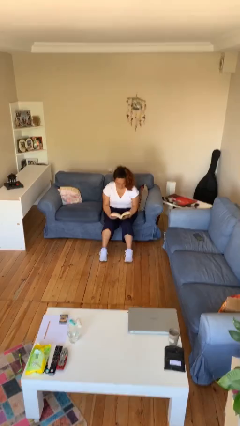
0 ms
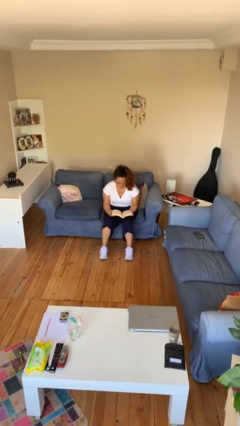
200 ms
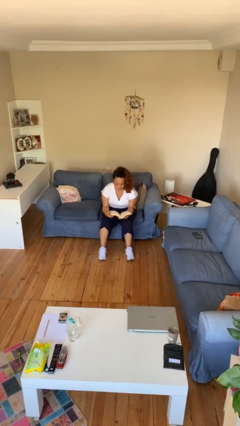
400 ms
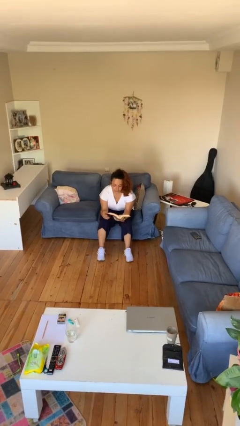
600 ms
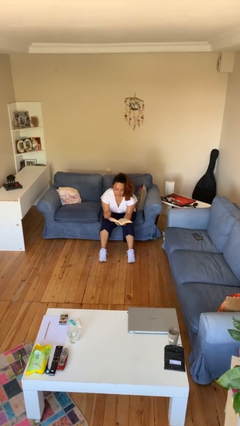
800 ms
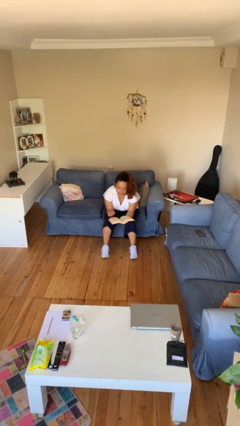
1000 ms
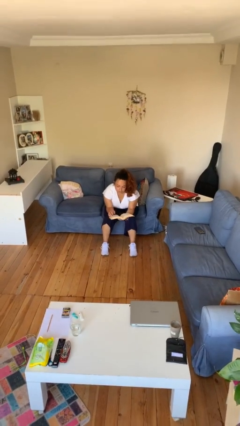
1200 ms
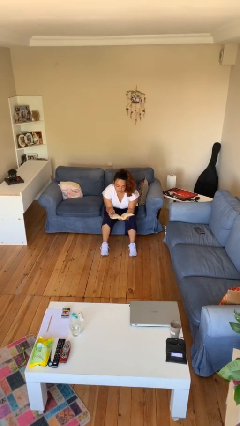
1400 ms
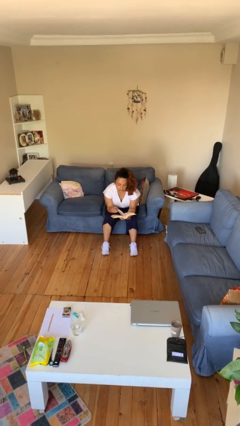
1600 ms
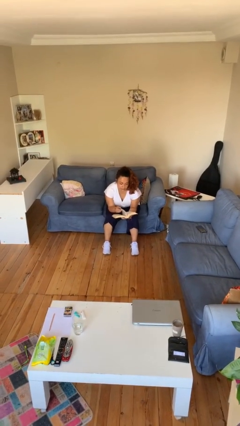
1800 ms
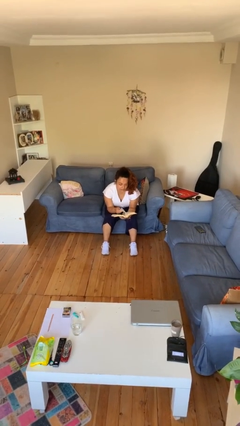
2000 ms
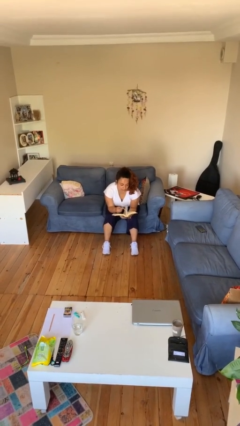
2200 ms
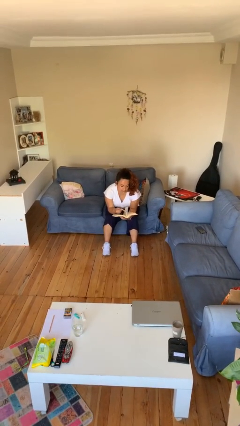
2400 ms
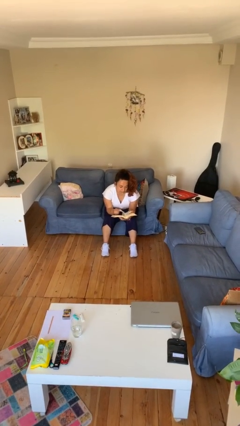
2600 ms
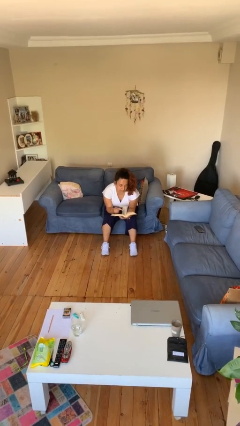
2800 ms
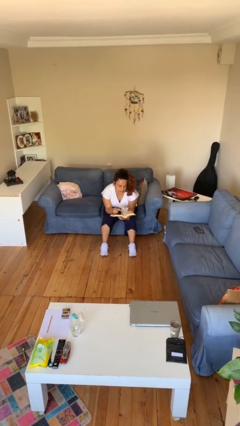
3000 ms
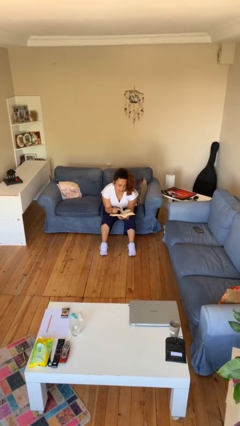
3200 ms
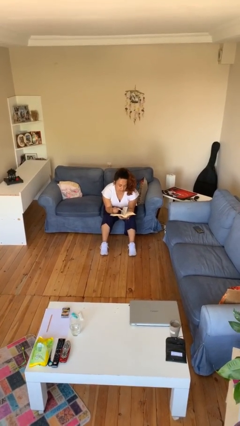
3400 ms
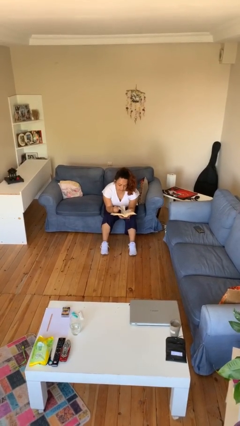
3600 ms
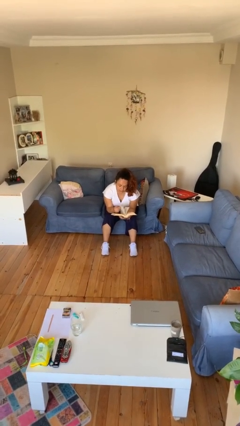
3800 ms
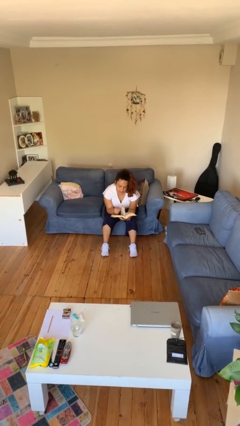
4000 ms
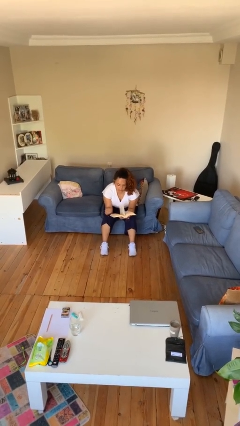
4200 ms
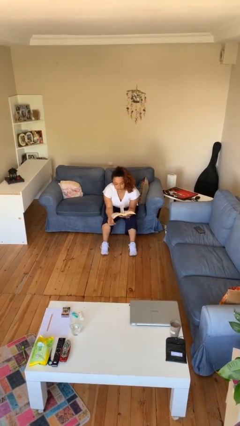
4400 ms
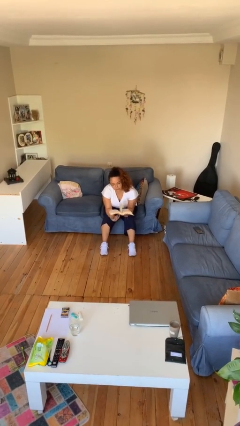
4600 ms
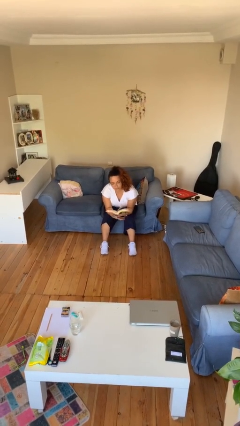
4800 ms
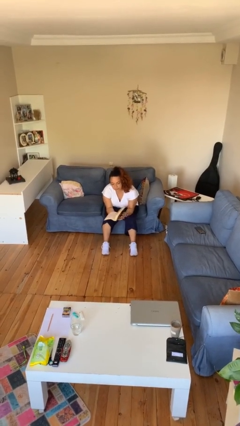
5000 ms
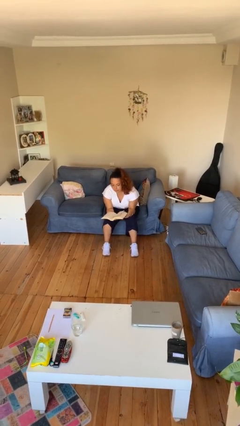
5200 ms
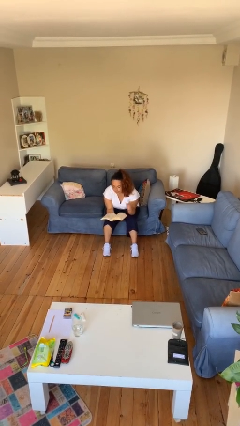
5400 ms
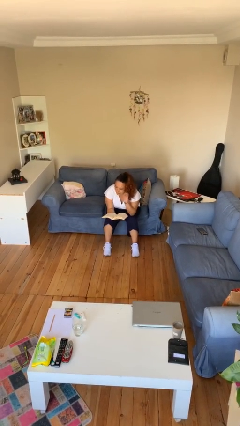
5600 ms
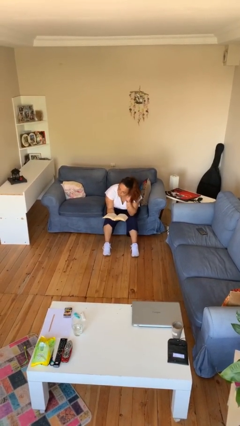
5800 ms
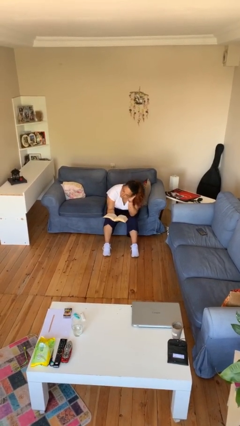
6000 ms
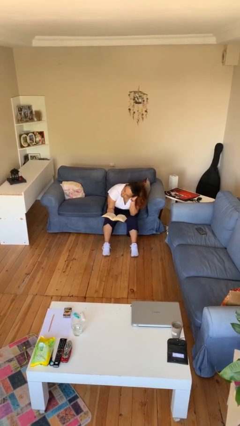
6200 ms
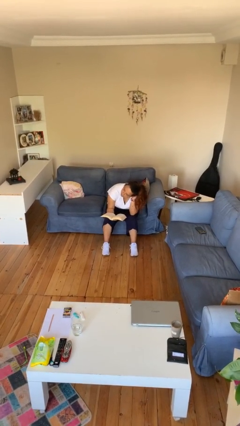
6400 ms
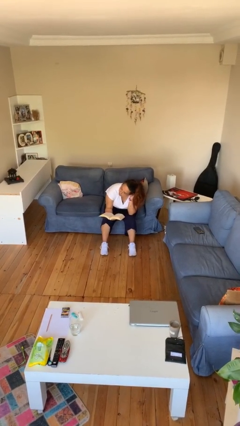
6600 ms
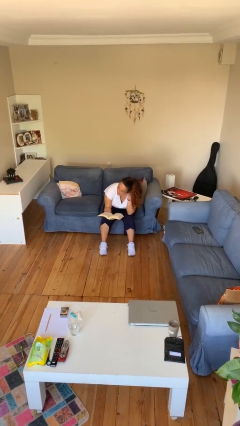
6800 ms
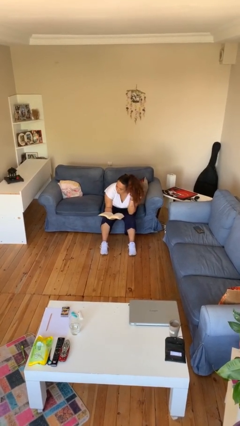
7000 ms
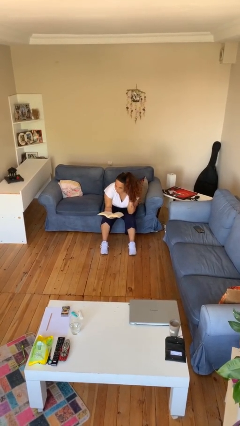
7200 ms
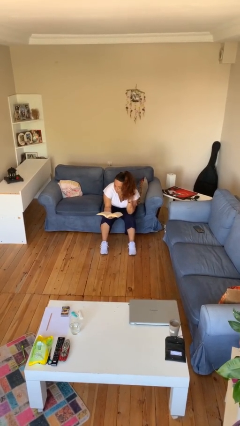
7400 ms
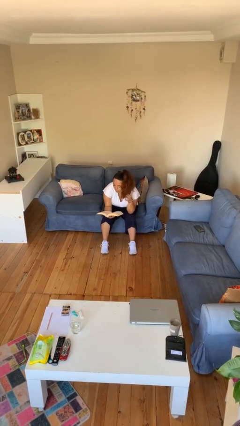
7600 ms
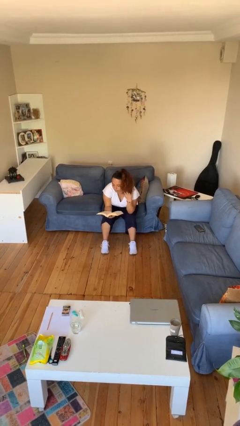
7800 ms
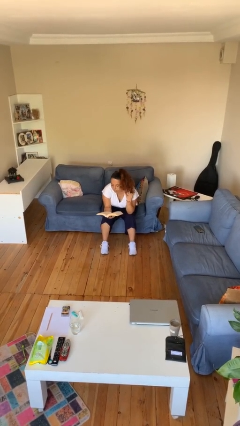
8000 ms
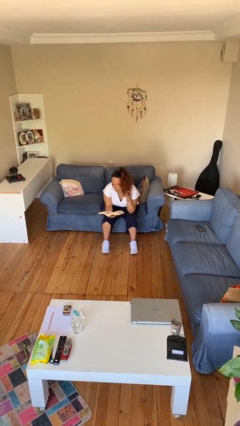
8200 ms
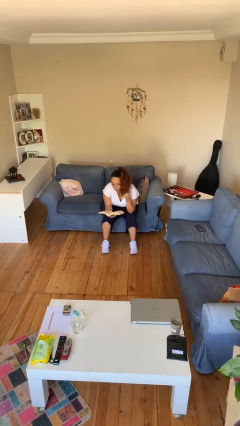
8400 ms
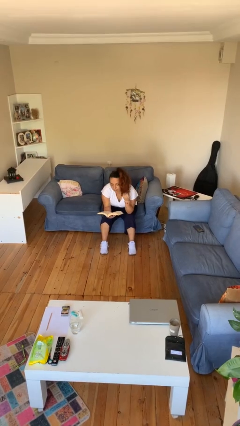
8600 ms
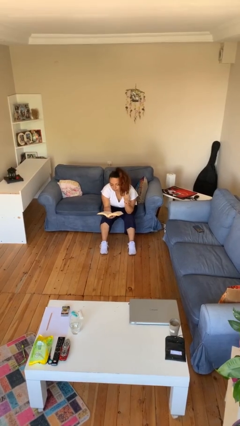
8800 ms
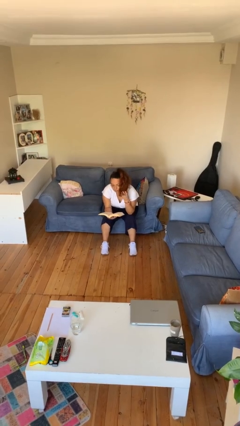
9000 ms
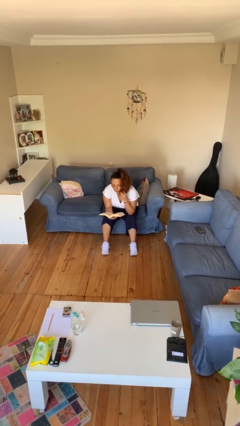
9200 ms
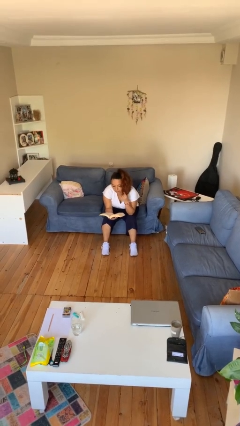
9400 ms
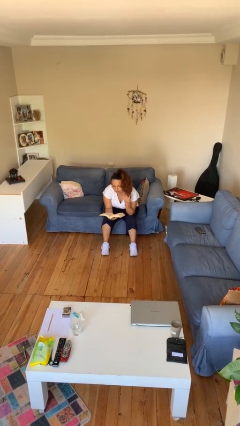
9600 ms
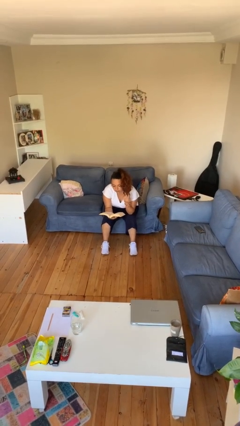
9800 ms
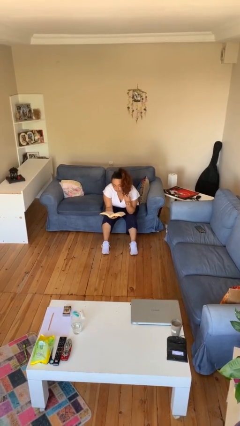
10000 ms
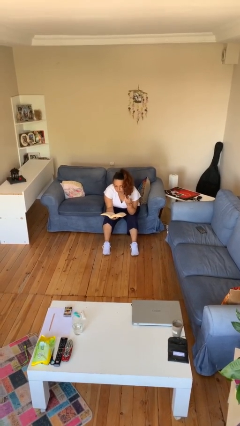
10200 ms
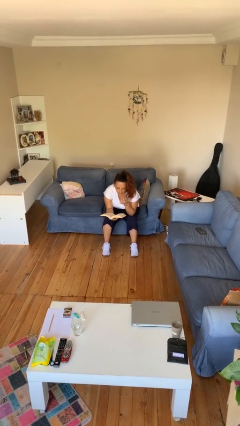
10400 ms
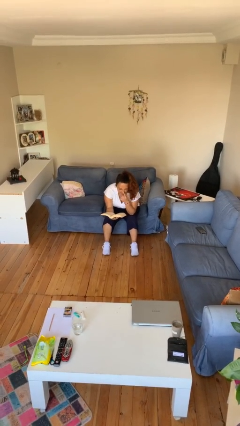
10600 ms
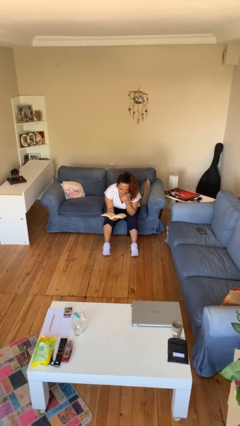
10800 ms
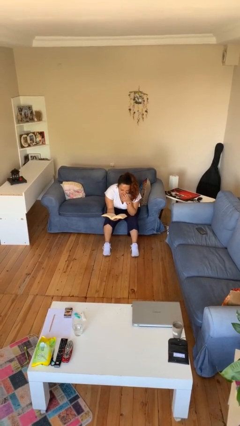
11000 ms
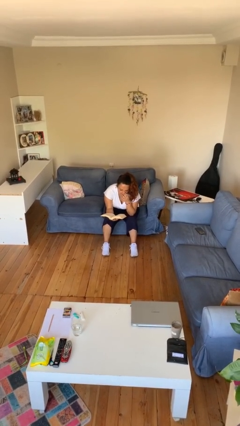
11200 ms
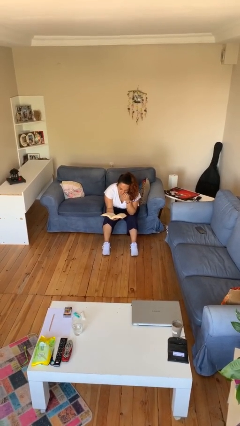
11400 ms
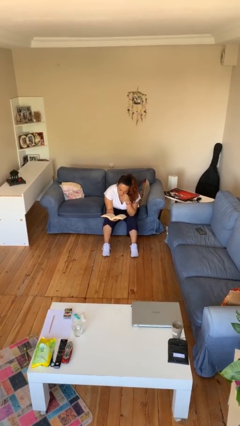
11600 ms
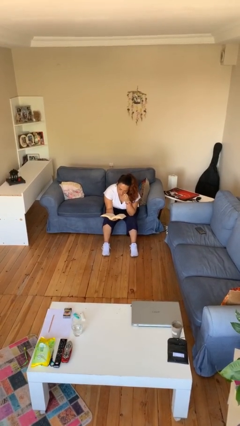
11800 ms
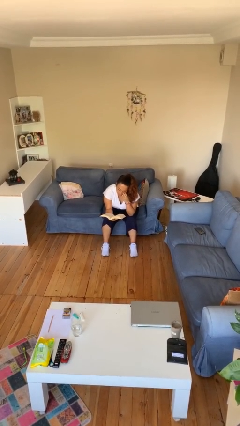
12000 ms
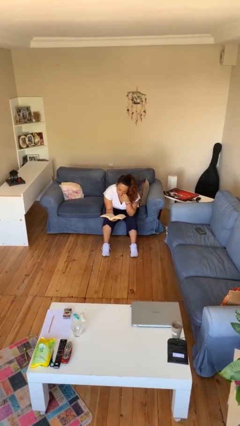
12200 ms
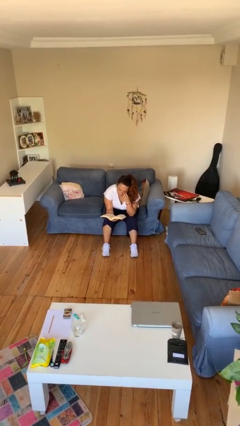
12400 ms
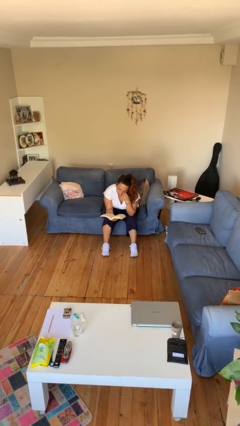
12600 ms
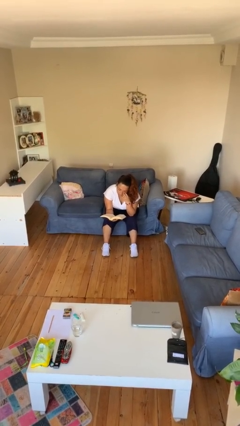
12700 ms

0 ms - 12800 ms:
person reads document

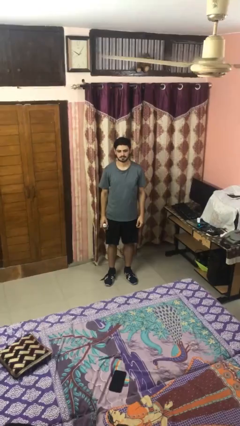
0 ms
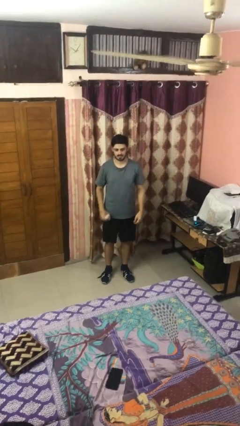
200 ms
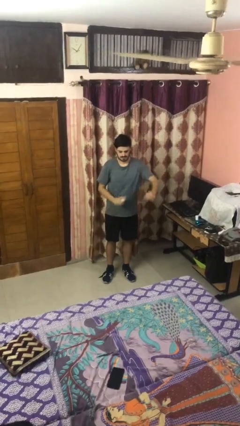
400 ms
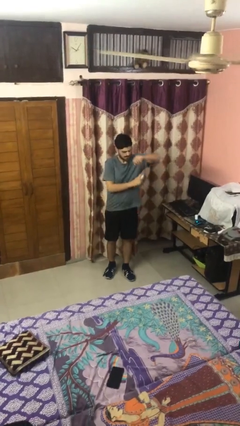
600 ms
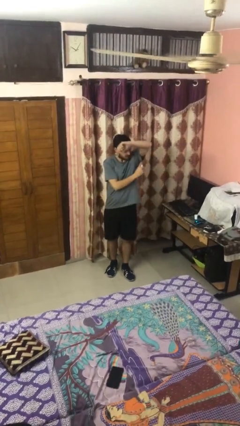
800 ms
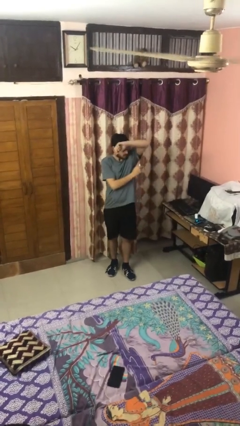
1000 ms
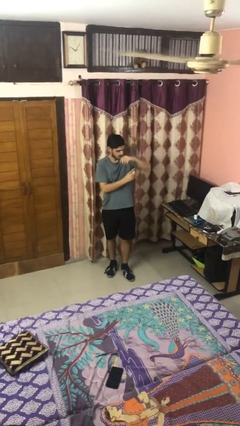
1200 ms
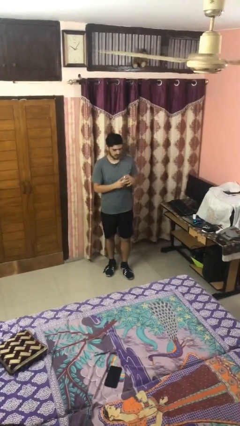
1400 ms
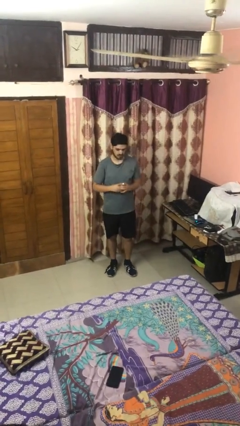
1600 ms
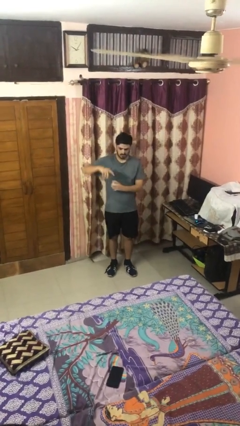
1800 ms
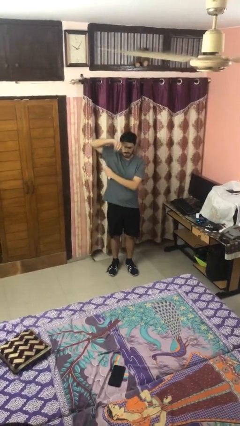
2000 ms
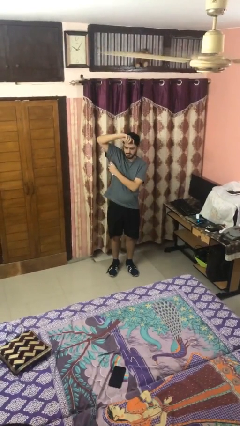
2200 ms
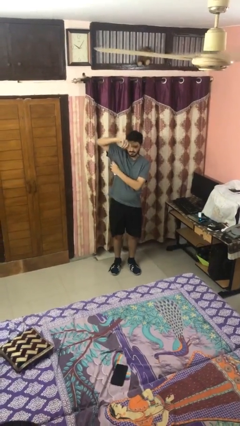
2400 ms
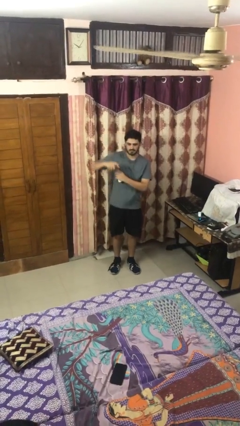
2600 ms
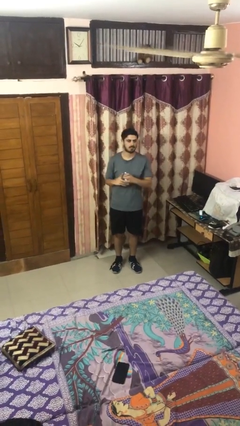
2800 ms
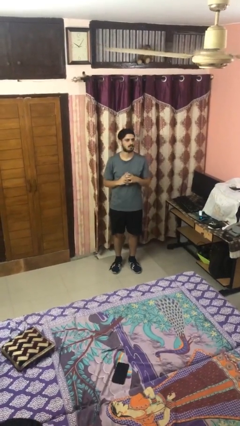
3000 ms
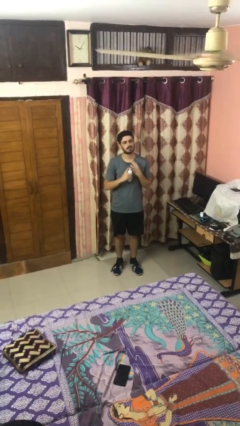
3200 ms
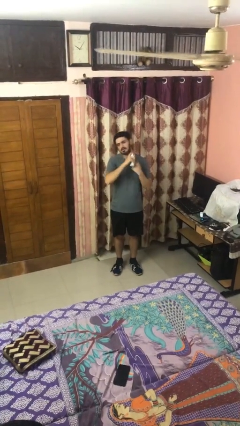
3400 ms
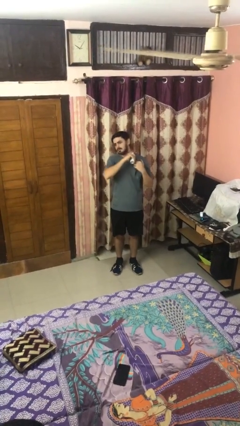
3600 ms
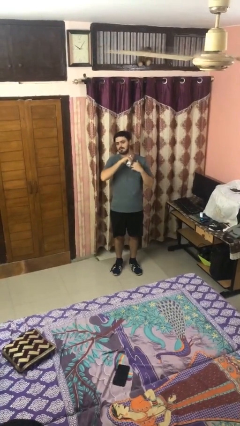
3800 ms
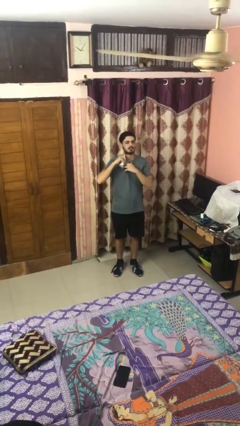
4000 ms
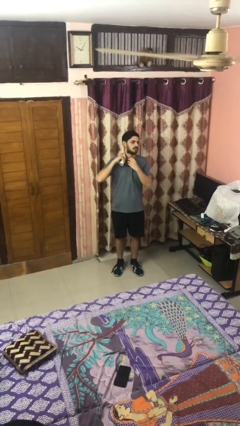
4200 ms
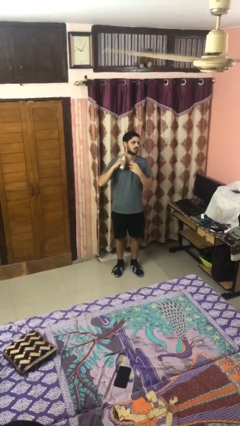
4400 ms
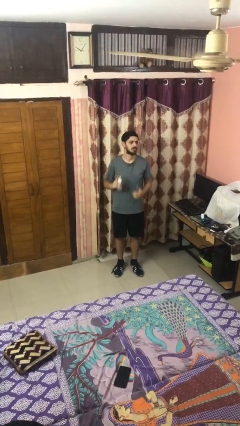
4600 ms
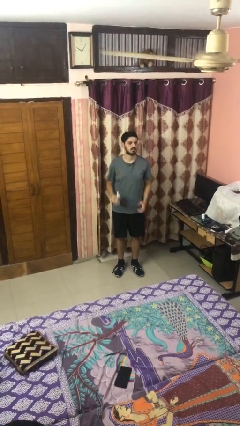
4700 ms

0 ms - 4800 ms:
person applies deodorant

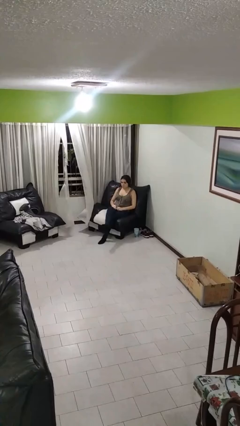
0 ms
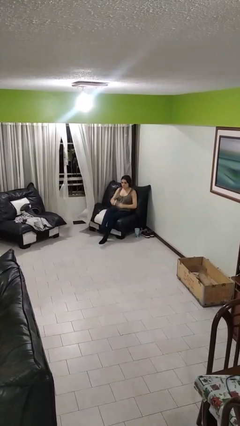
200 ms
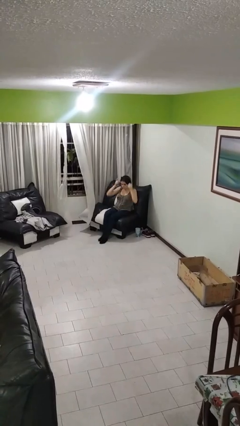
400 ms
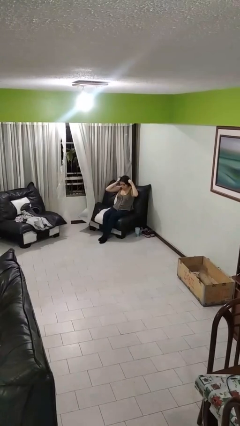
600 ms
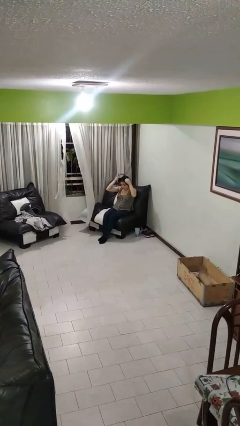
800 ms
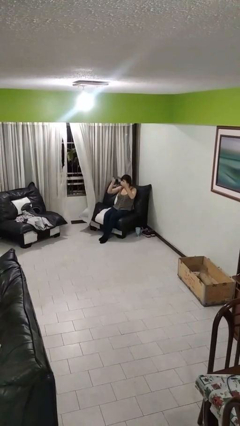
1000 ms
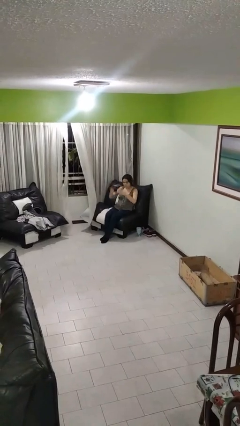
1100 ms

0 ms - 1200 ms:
person takes off headphones
